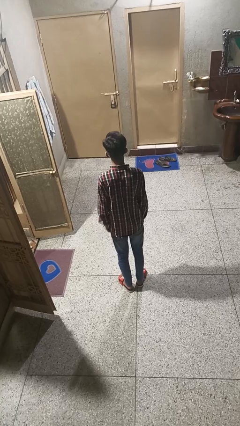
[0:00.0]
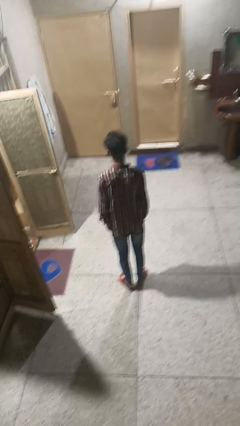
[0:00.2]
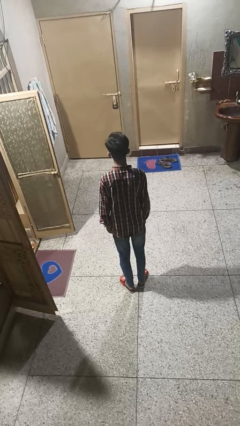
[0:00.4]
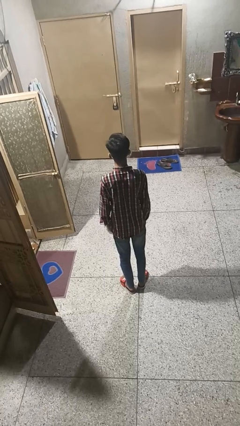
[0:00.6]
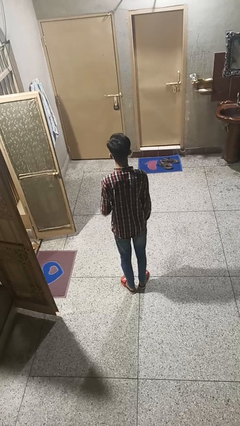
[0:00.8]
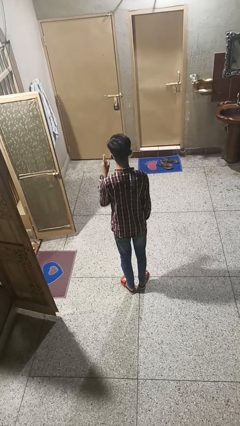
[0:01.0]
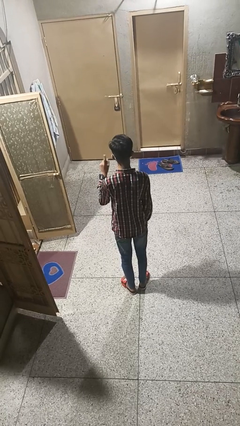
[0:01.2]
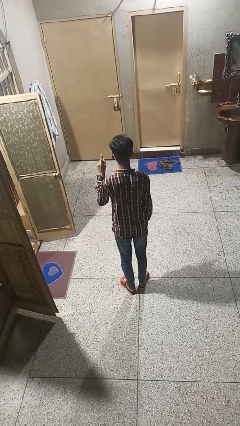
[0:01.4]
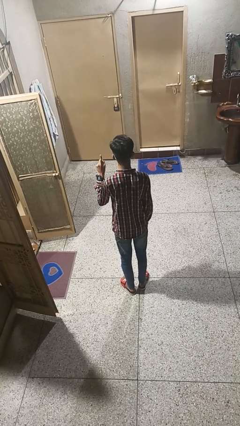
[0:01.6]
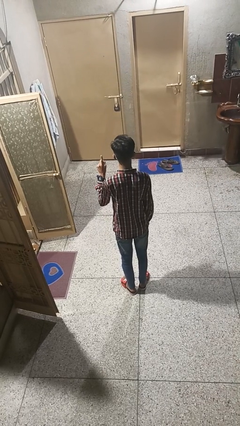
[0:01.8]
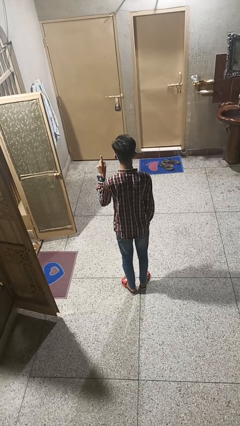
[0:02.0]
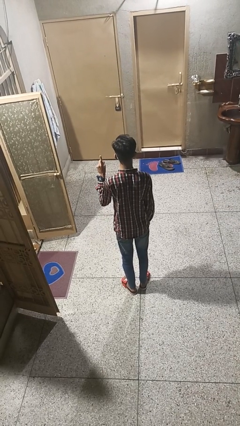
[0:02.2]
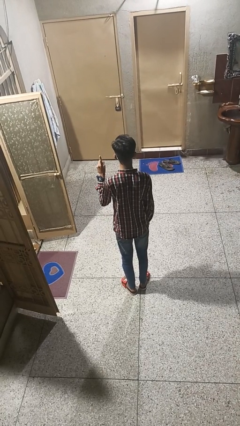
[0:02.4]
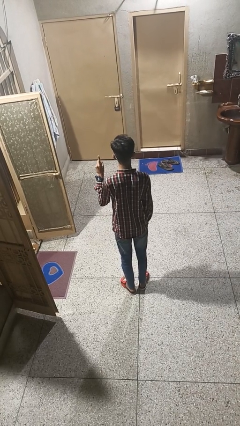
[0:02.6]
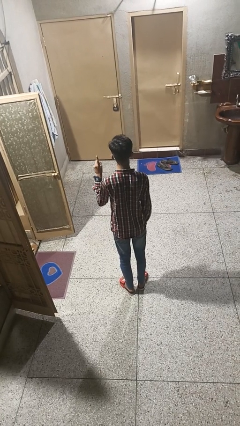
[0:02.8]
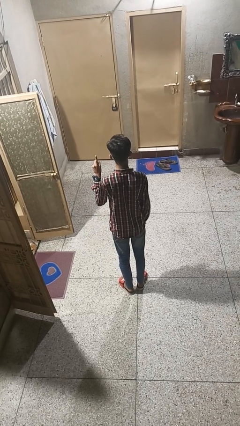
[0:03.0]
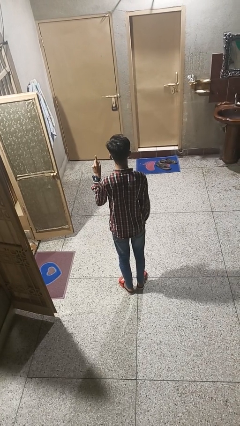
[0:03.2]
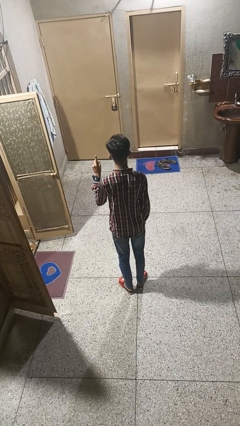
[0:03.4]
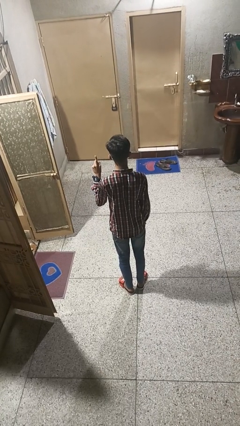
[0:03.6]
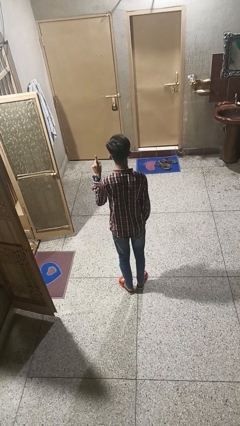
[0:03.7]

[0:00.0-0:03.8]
person gestures number one

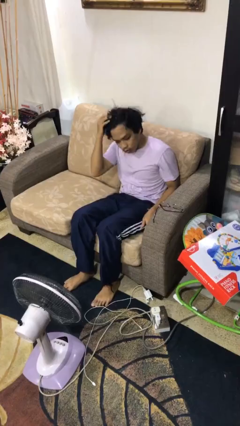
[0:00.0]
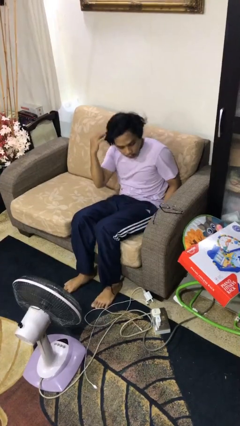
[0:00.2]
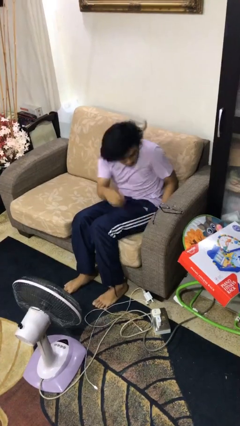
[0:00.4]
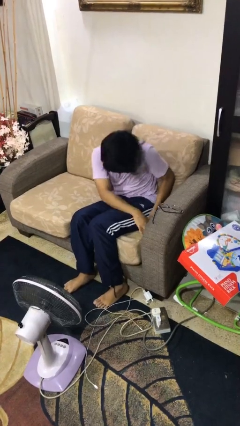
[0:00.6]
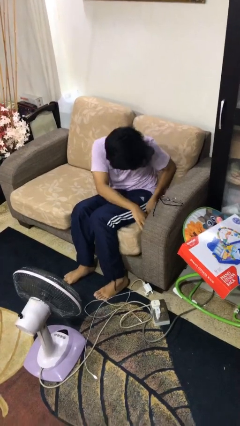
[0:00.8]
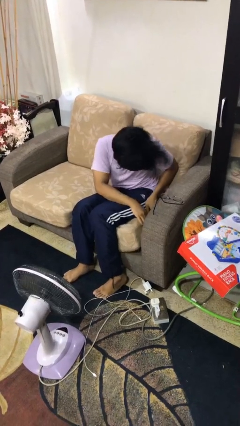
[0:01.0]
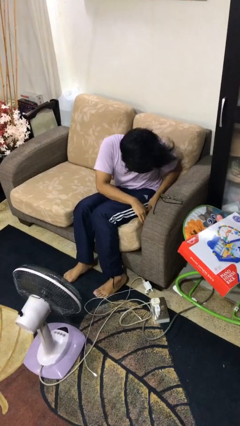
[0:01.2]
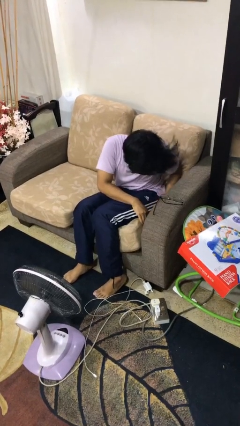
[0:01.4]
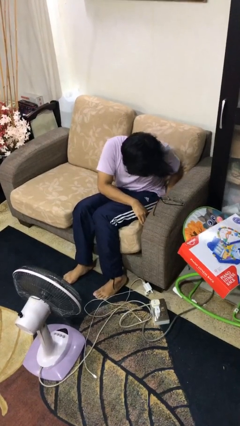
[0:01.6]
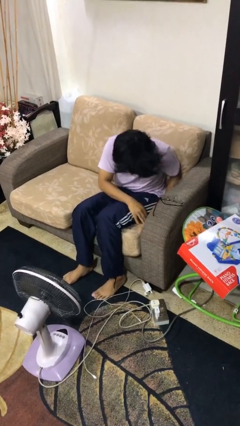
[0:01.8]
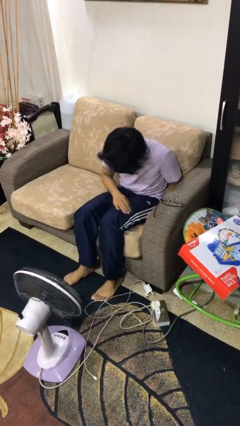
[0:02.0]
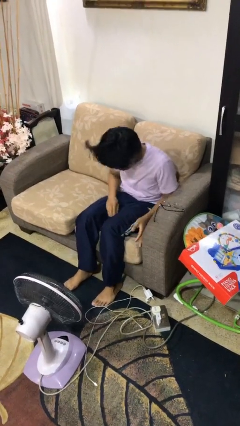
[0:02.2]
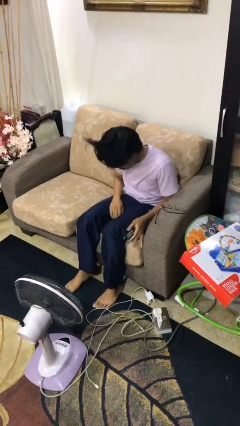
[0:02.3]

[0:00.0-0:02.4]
person searches in couch

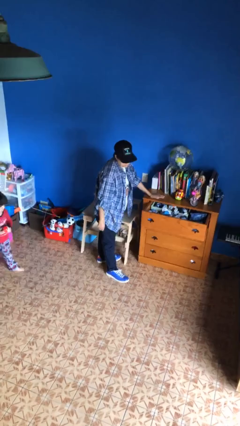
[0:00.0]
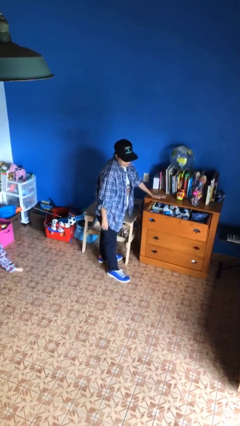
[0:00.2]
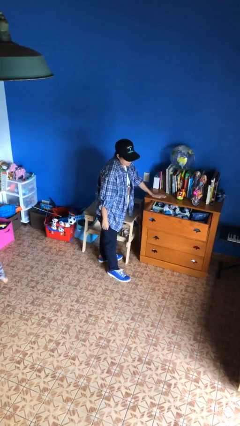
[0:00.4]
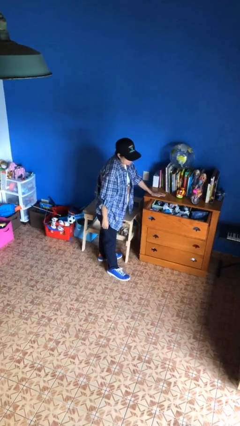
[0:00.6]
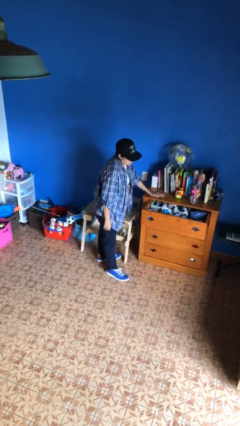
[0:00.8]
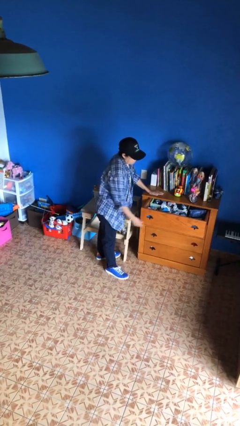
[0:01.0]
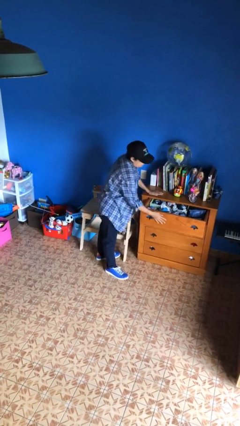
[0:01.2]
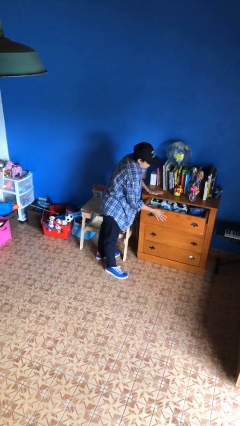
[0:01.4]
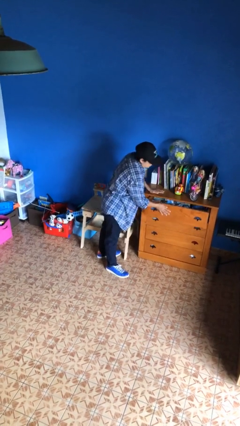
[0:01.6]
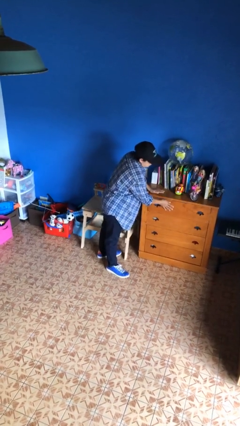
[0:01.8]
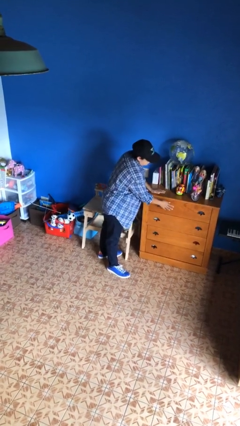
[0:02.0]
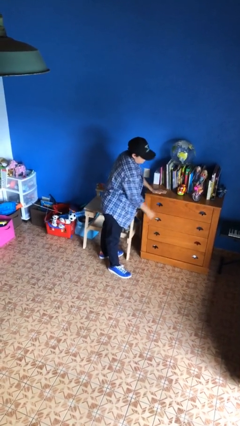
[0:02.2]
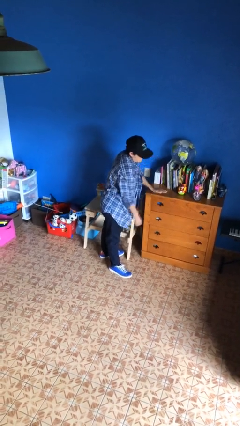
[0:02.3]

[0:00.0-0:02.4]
person closes dresser drawer

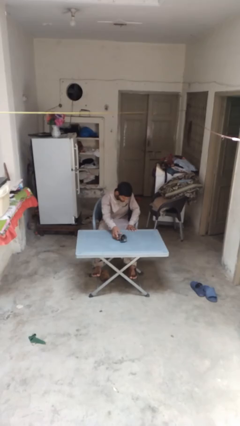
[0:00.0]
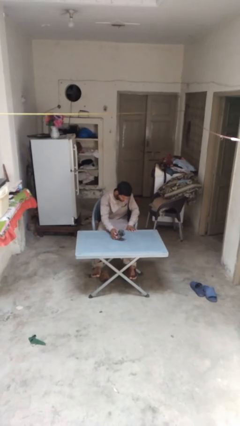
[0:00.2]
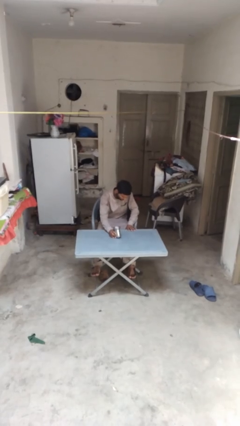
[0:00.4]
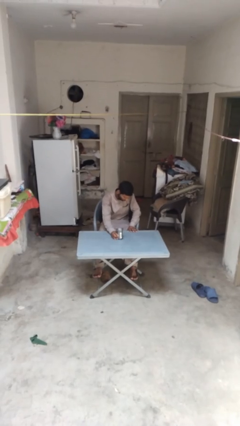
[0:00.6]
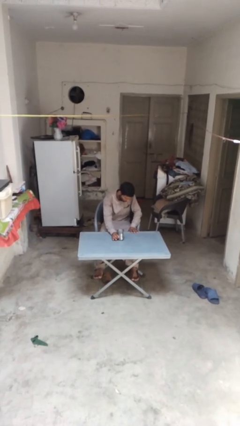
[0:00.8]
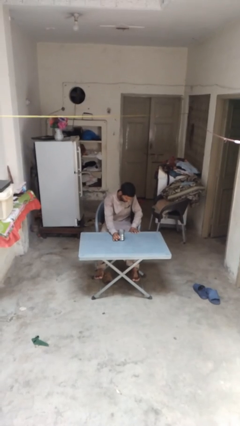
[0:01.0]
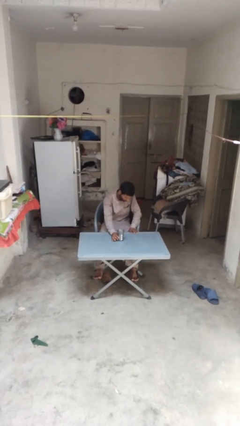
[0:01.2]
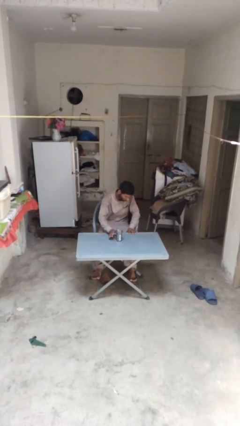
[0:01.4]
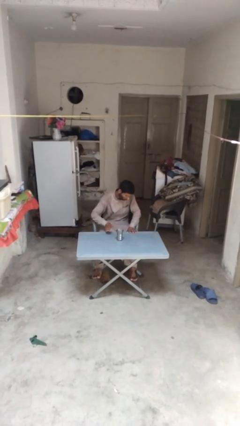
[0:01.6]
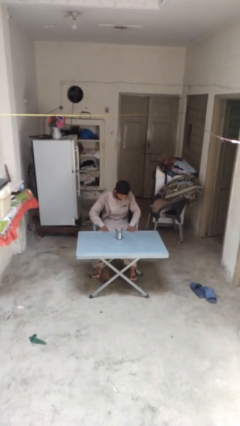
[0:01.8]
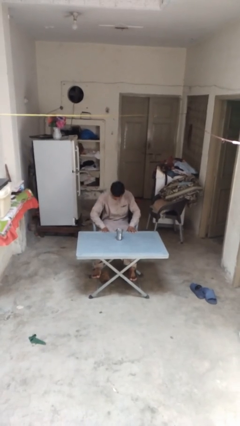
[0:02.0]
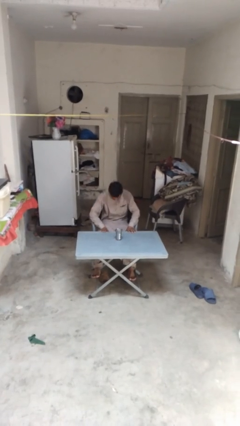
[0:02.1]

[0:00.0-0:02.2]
person sets upright glass

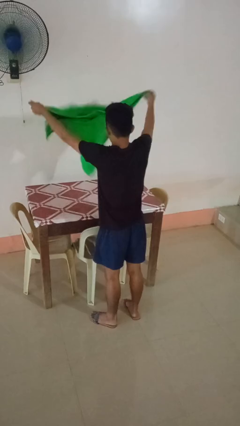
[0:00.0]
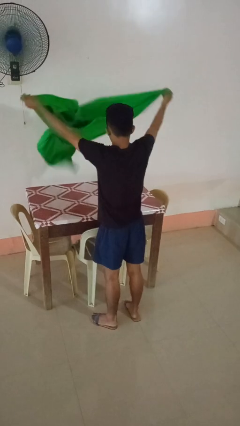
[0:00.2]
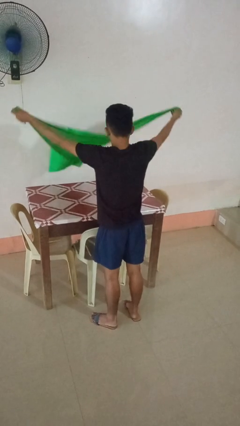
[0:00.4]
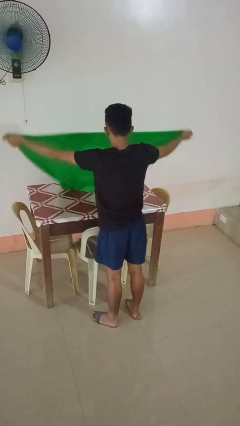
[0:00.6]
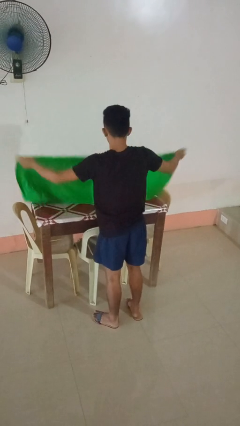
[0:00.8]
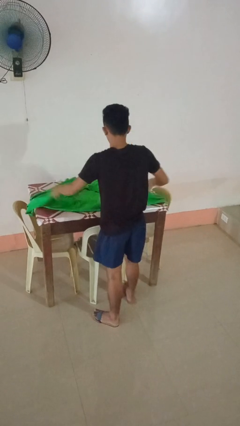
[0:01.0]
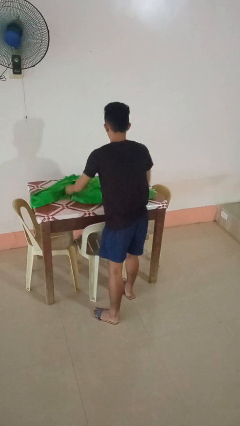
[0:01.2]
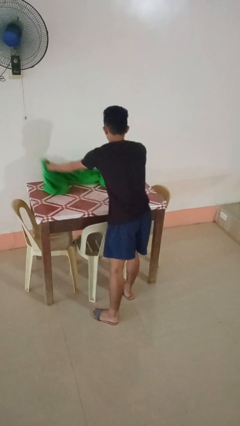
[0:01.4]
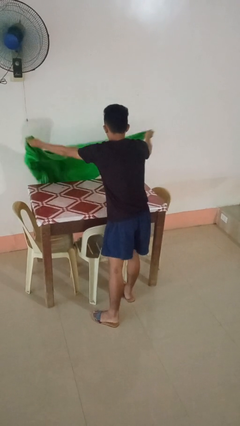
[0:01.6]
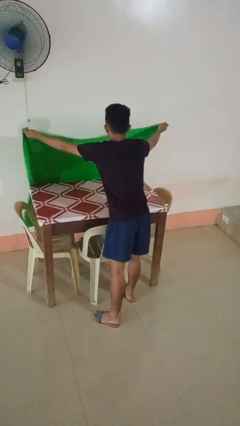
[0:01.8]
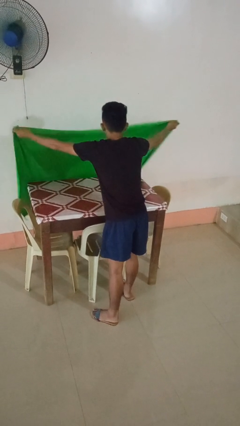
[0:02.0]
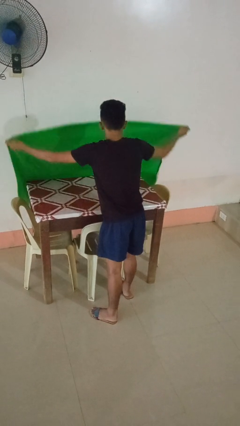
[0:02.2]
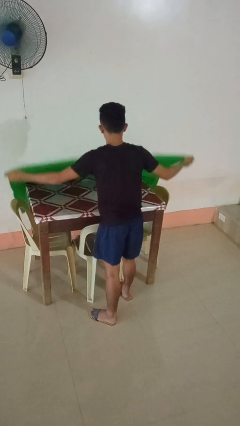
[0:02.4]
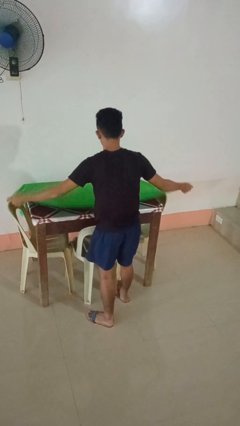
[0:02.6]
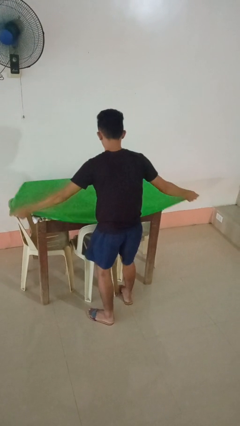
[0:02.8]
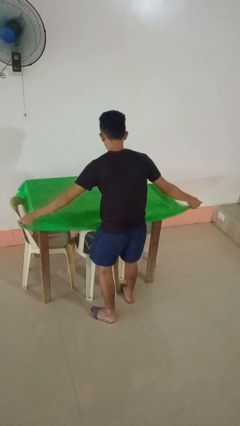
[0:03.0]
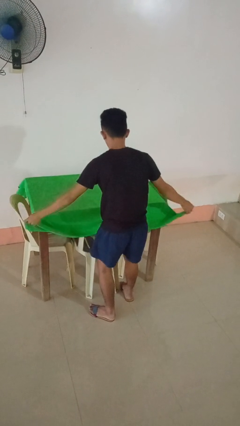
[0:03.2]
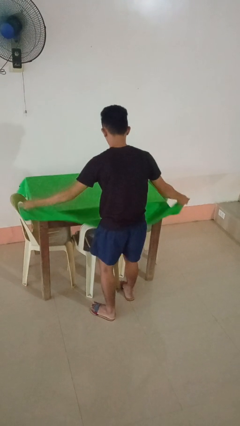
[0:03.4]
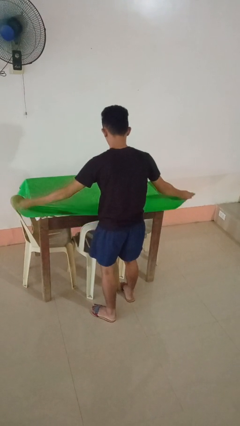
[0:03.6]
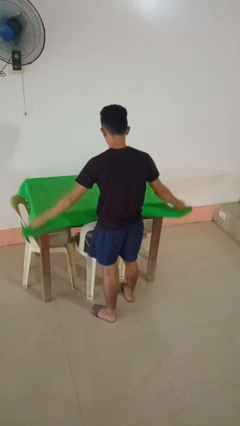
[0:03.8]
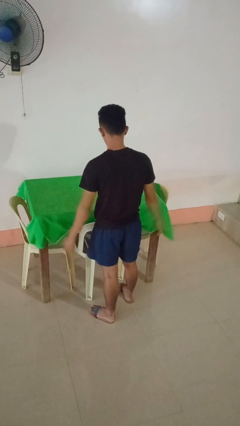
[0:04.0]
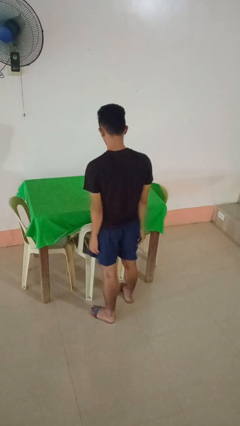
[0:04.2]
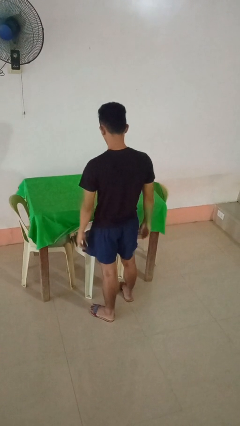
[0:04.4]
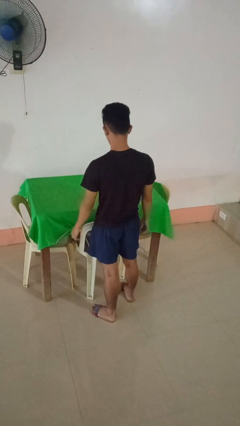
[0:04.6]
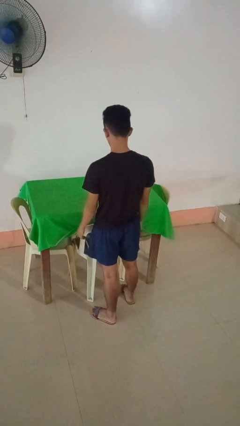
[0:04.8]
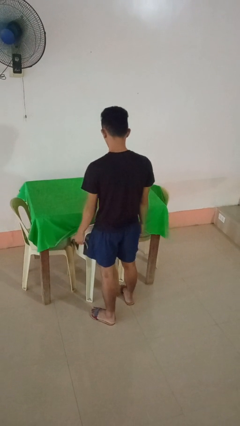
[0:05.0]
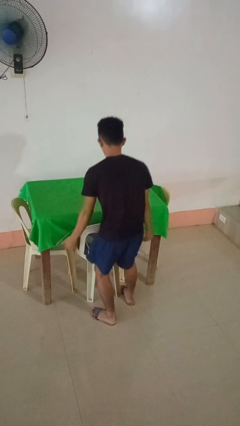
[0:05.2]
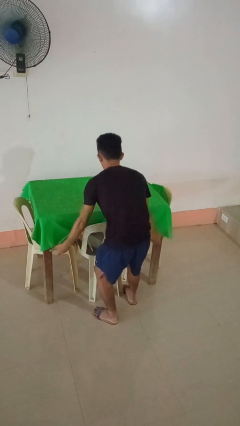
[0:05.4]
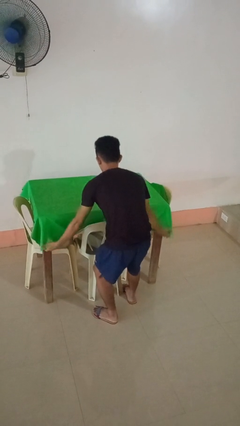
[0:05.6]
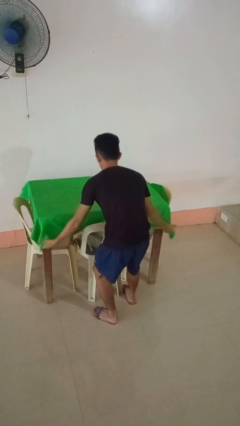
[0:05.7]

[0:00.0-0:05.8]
person spreads tablecloth

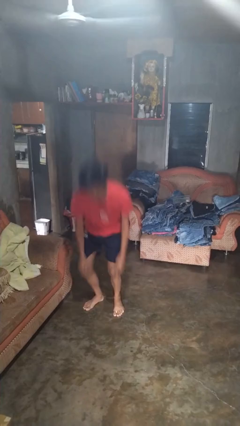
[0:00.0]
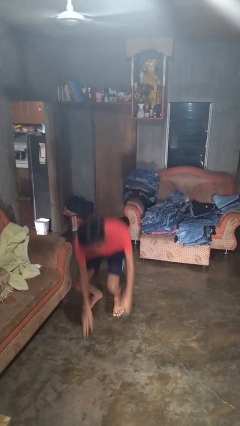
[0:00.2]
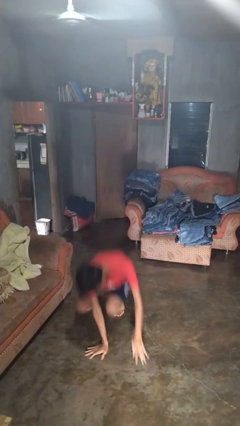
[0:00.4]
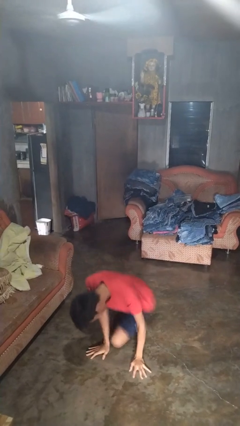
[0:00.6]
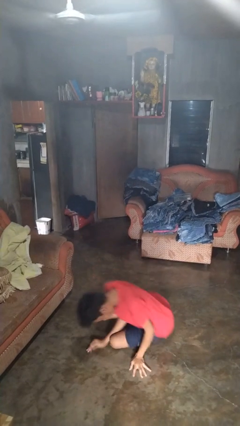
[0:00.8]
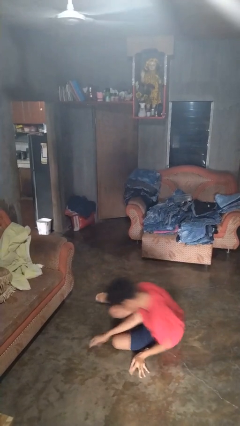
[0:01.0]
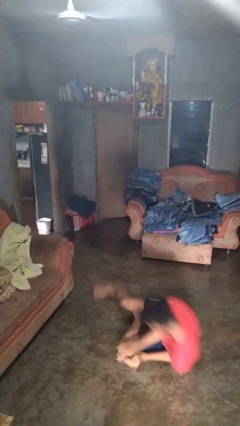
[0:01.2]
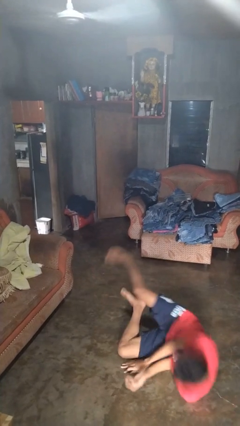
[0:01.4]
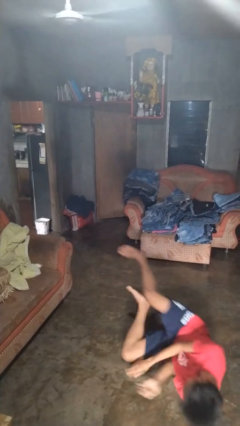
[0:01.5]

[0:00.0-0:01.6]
person falls while standing
